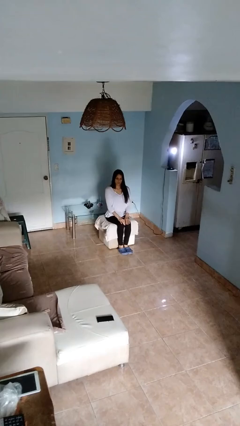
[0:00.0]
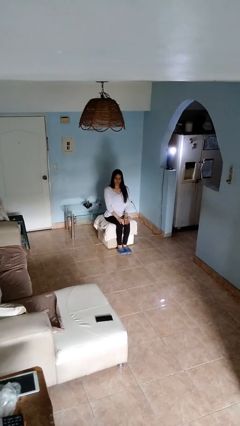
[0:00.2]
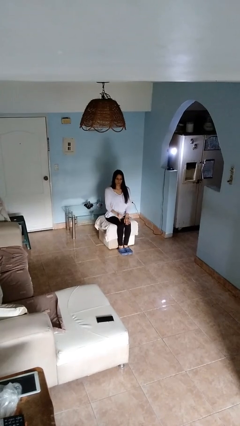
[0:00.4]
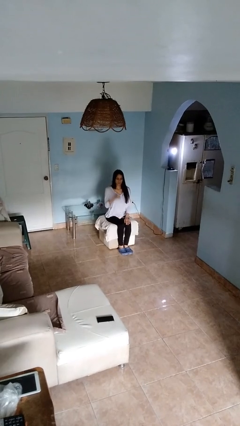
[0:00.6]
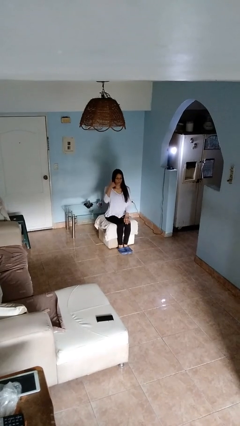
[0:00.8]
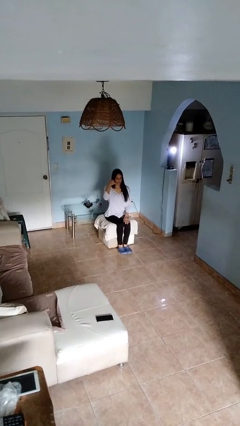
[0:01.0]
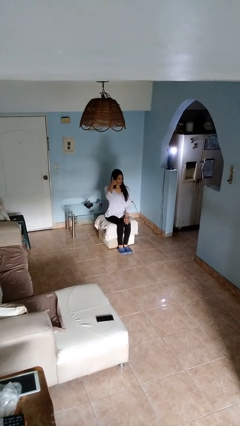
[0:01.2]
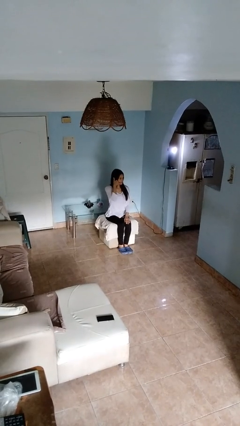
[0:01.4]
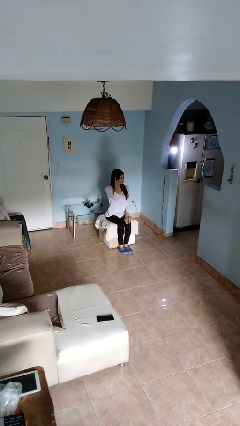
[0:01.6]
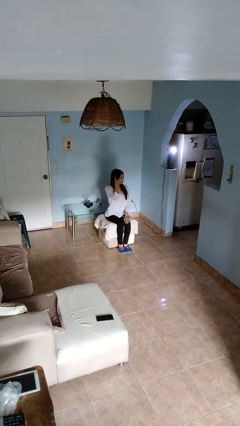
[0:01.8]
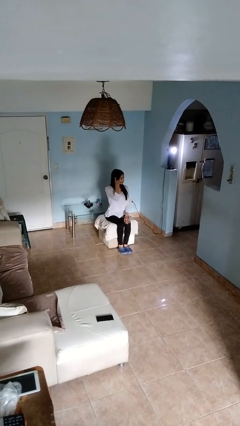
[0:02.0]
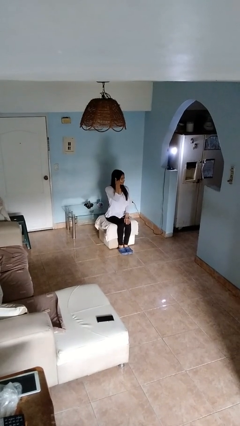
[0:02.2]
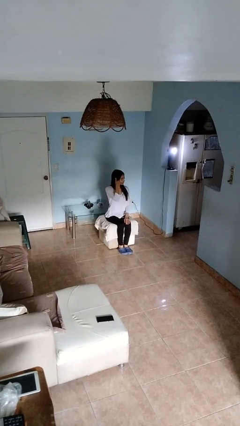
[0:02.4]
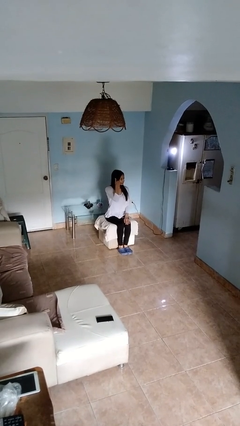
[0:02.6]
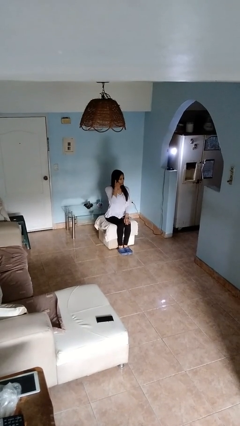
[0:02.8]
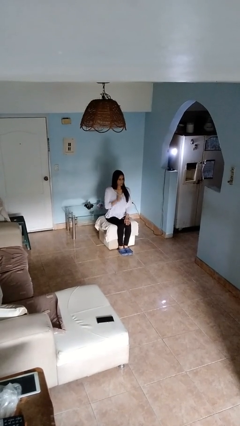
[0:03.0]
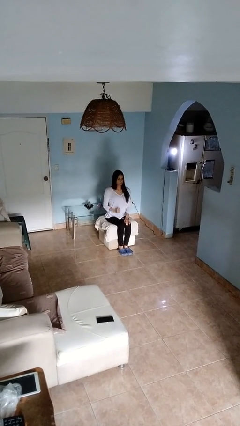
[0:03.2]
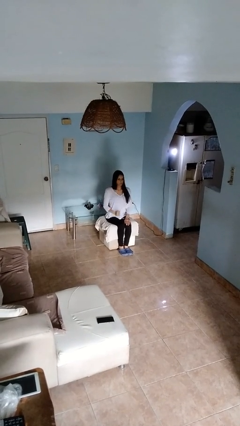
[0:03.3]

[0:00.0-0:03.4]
person gestures call me

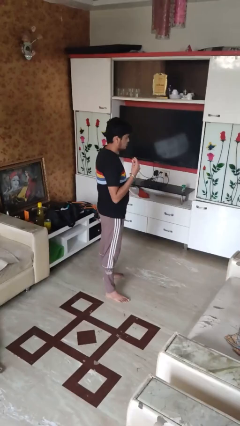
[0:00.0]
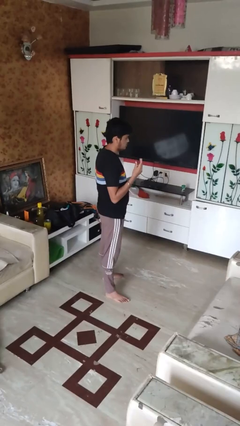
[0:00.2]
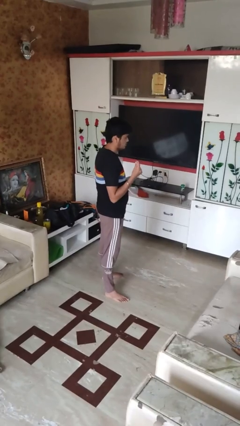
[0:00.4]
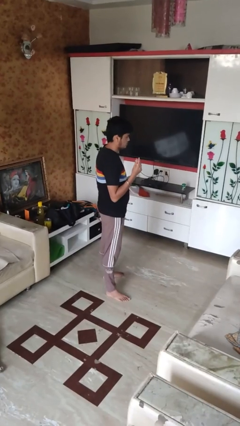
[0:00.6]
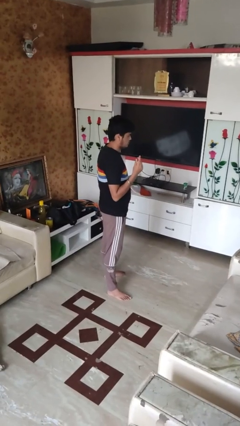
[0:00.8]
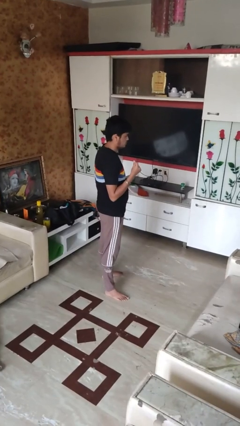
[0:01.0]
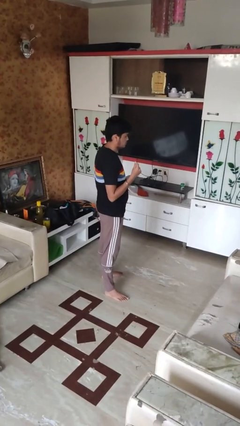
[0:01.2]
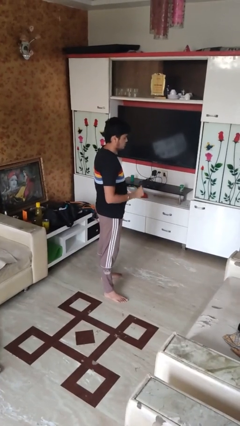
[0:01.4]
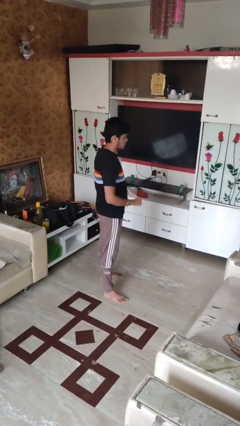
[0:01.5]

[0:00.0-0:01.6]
person snaps fingers

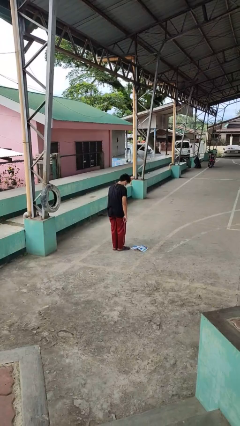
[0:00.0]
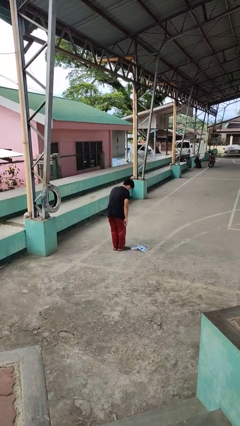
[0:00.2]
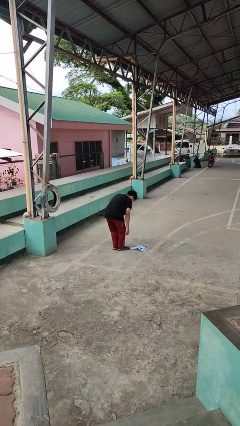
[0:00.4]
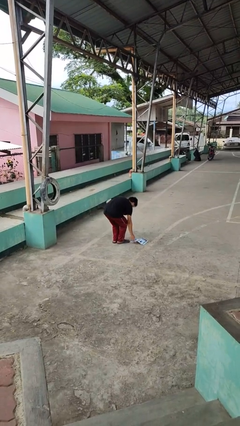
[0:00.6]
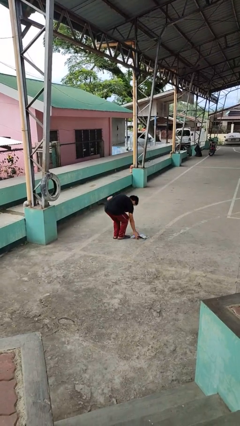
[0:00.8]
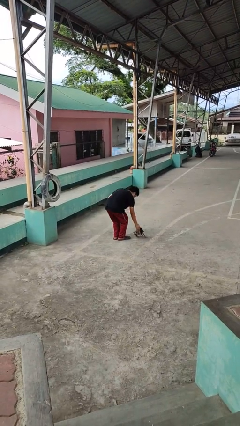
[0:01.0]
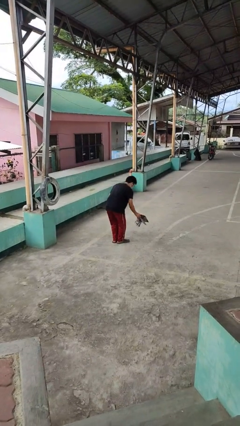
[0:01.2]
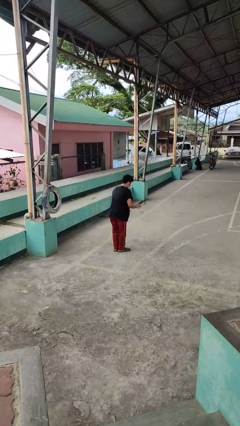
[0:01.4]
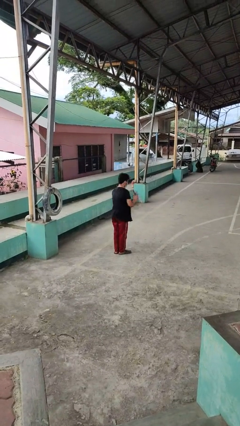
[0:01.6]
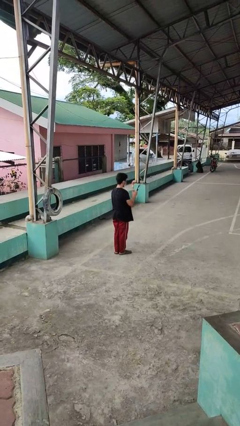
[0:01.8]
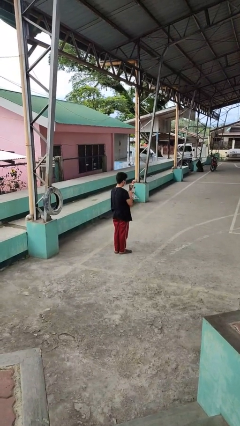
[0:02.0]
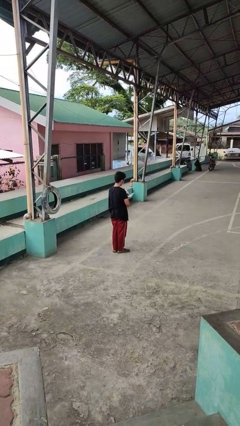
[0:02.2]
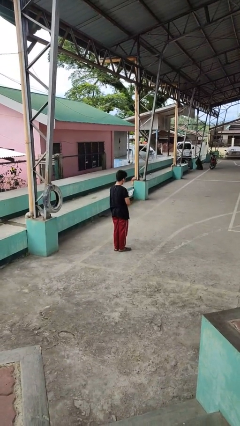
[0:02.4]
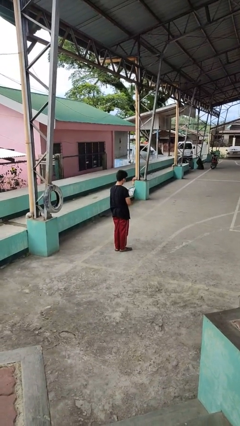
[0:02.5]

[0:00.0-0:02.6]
person picks up object from floor

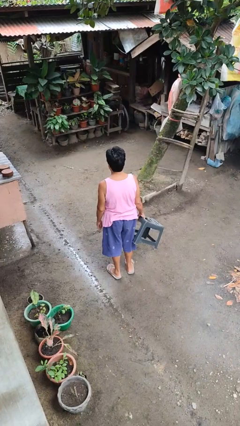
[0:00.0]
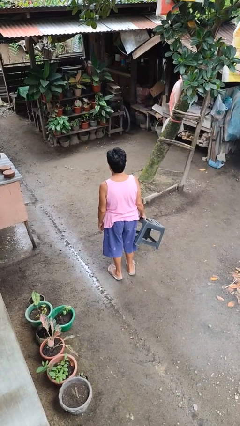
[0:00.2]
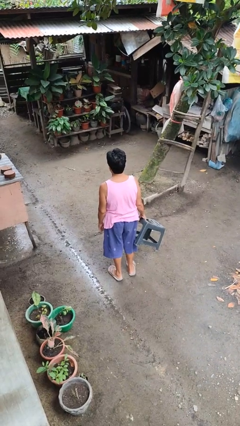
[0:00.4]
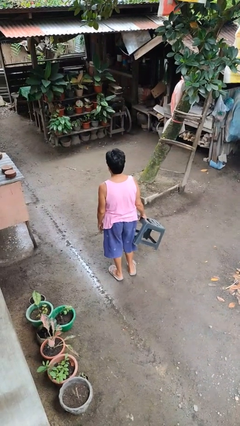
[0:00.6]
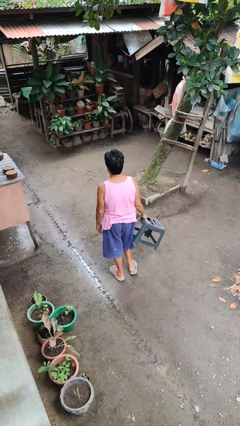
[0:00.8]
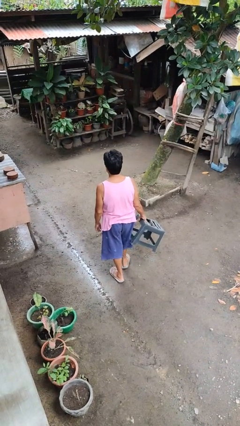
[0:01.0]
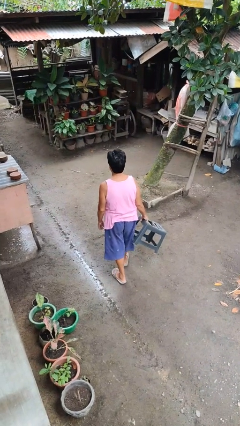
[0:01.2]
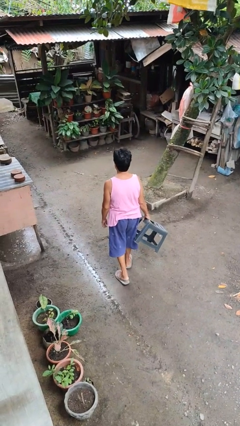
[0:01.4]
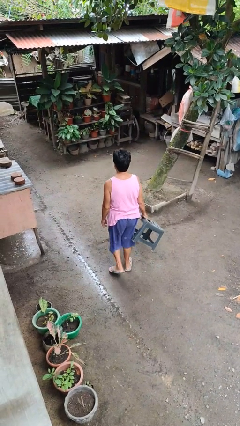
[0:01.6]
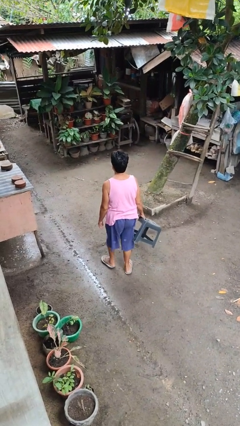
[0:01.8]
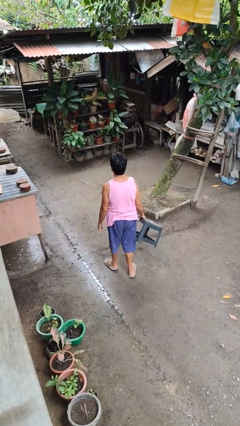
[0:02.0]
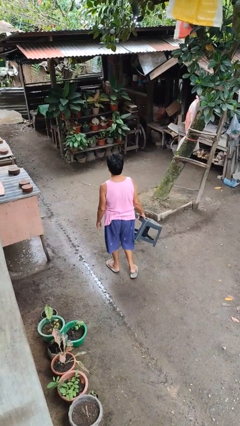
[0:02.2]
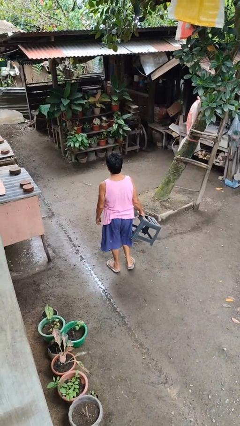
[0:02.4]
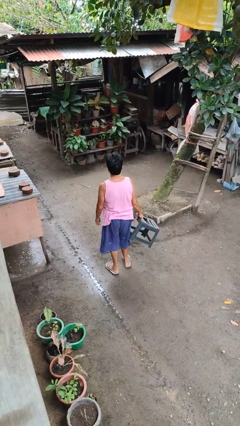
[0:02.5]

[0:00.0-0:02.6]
person carries furniture

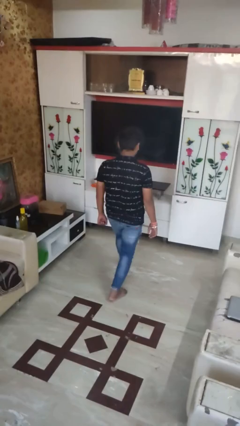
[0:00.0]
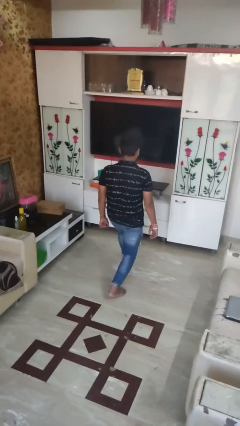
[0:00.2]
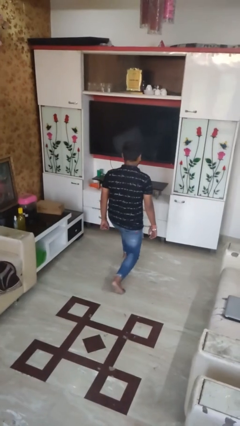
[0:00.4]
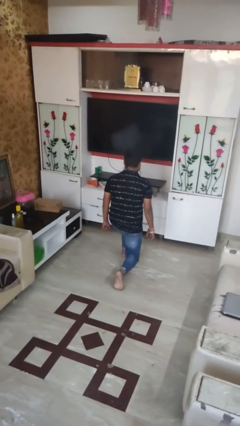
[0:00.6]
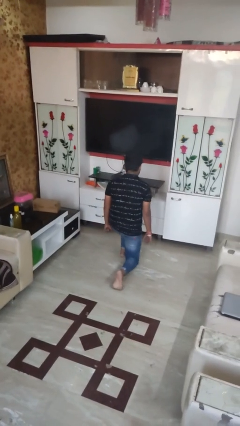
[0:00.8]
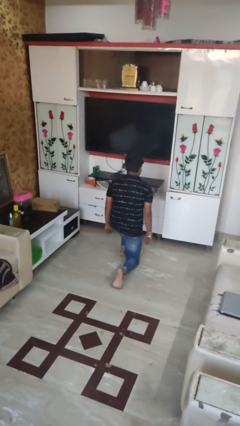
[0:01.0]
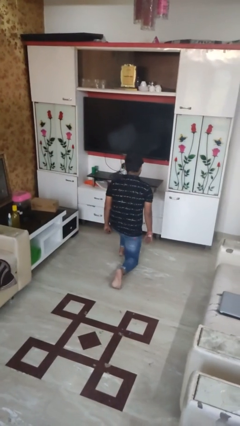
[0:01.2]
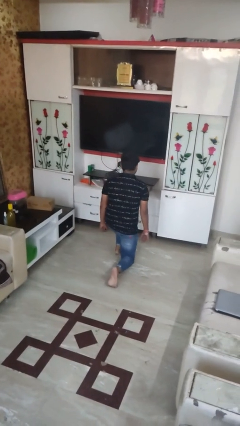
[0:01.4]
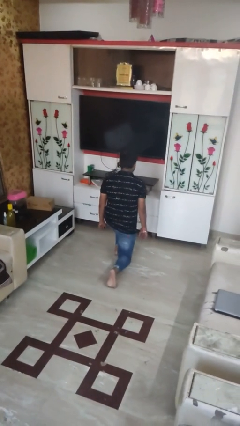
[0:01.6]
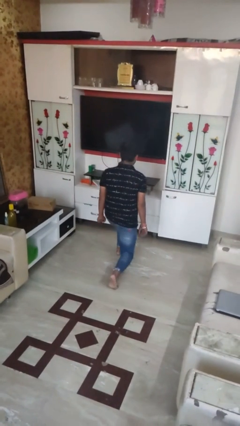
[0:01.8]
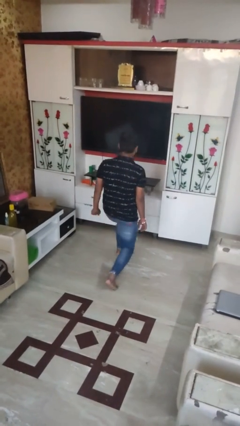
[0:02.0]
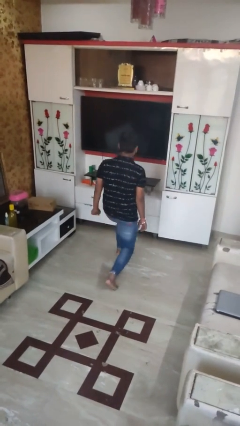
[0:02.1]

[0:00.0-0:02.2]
person exercises with lunges

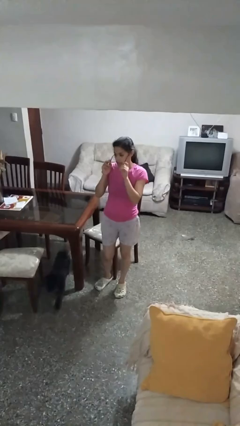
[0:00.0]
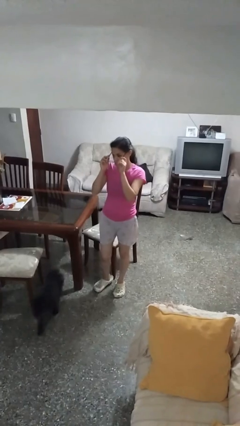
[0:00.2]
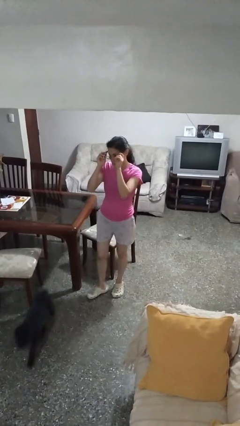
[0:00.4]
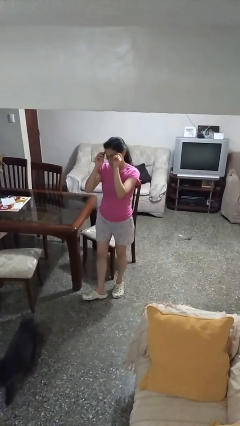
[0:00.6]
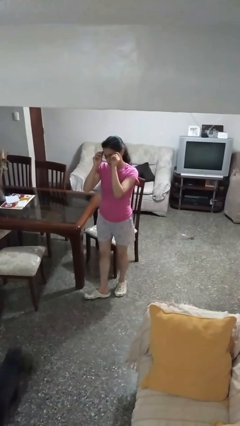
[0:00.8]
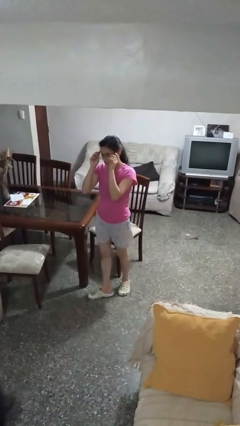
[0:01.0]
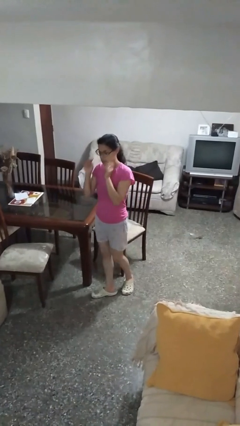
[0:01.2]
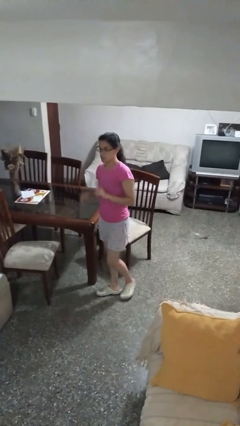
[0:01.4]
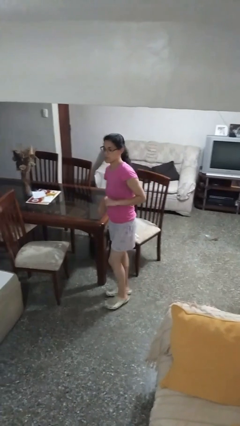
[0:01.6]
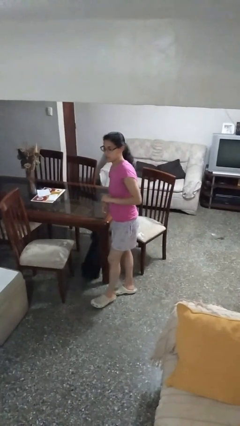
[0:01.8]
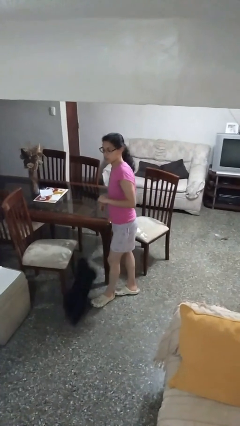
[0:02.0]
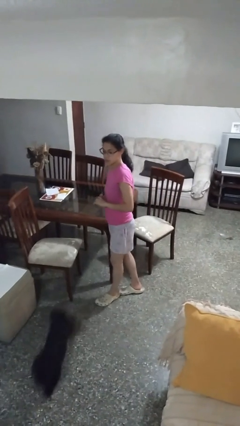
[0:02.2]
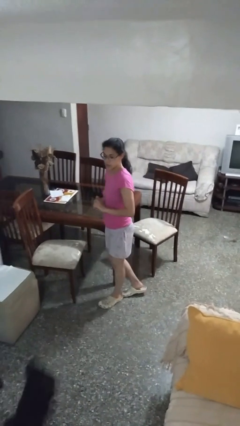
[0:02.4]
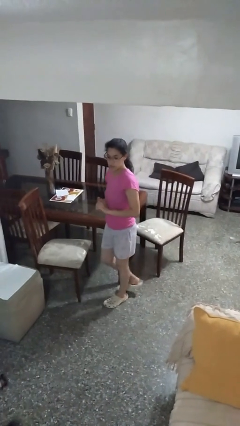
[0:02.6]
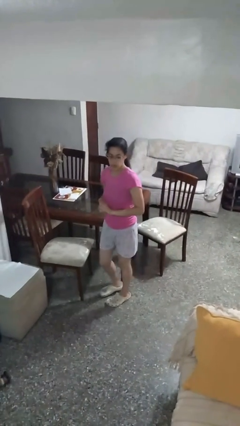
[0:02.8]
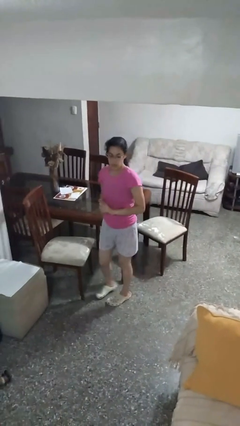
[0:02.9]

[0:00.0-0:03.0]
person puts on glasses

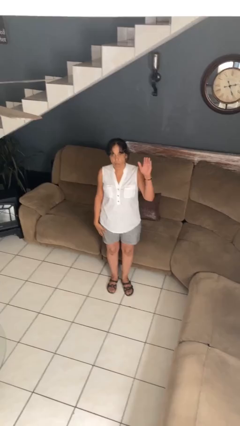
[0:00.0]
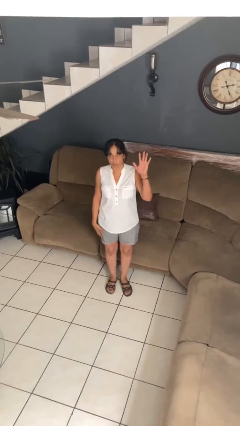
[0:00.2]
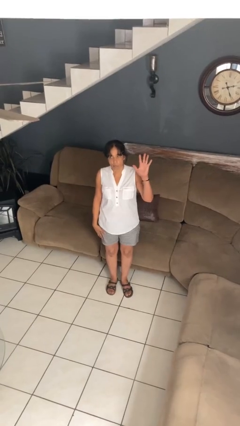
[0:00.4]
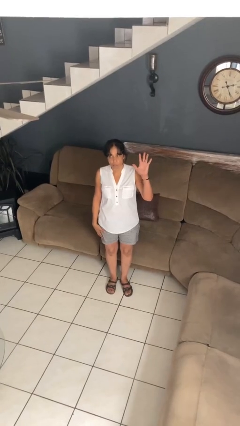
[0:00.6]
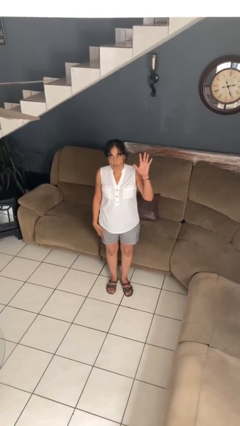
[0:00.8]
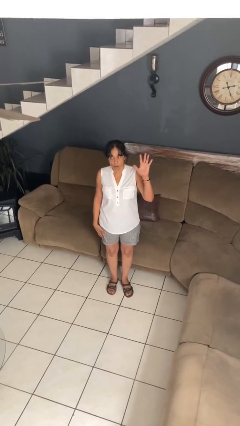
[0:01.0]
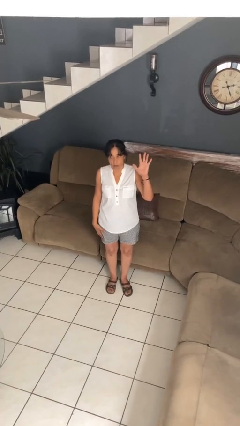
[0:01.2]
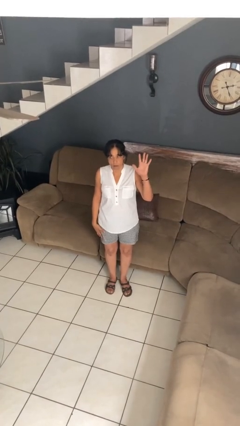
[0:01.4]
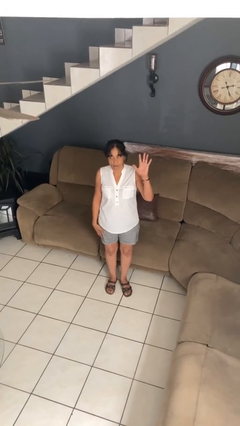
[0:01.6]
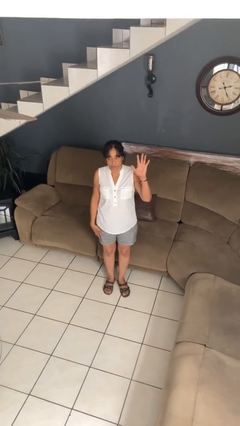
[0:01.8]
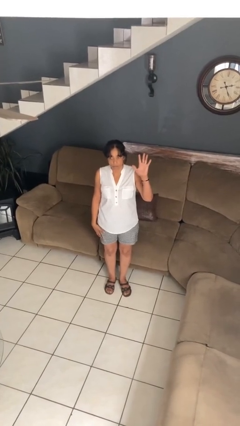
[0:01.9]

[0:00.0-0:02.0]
person gestures number five
